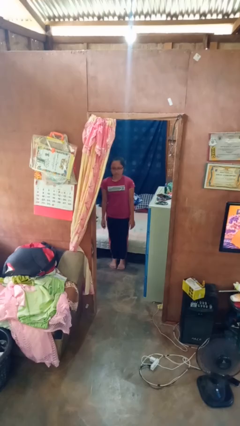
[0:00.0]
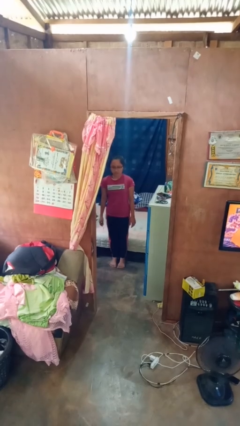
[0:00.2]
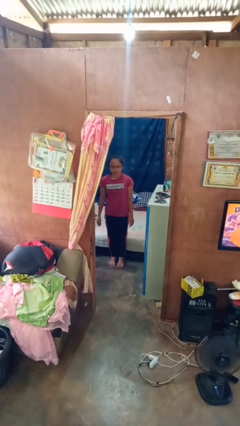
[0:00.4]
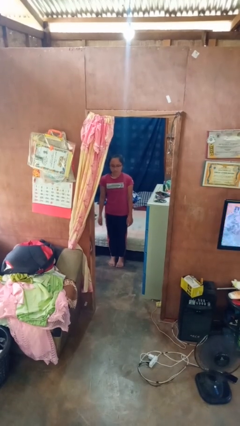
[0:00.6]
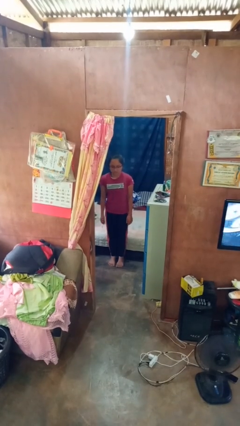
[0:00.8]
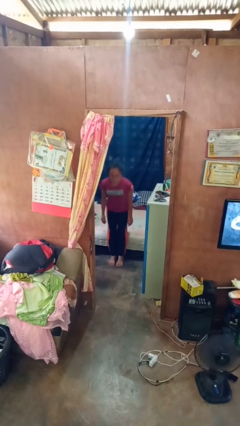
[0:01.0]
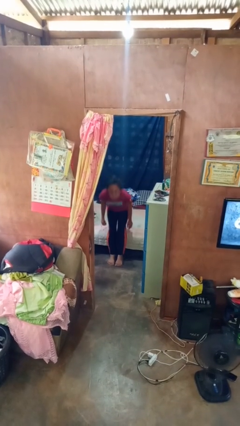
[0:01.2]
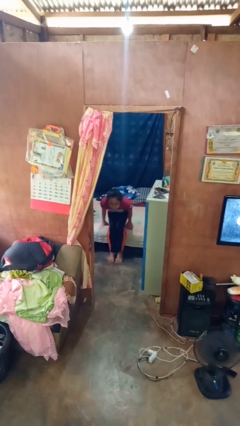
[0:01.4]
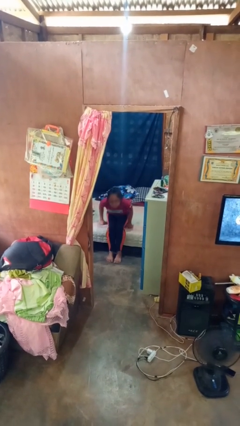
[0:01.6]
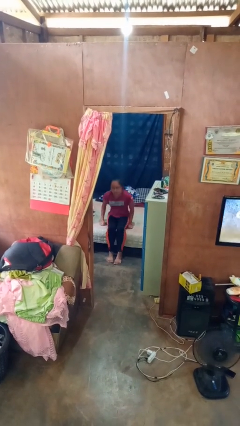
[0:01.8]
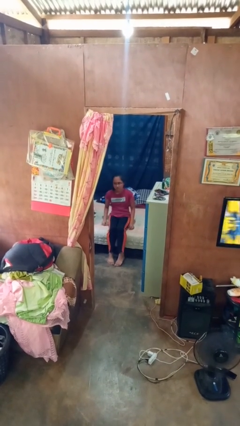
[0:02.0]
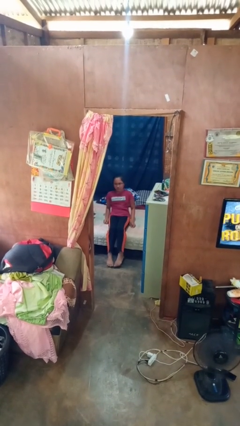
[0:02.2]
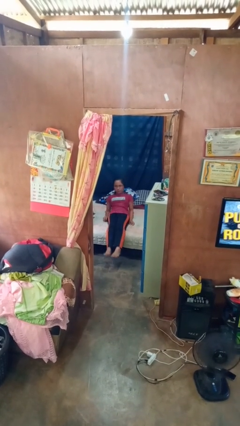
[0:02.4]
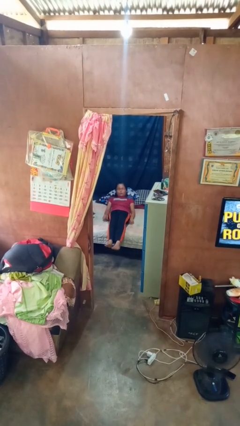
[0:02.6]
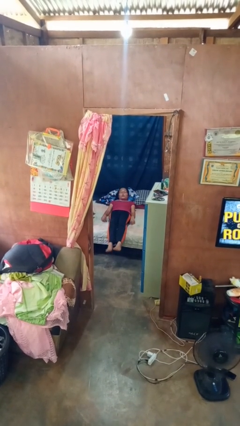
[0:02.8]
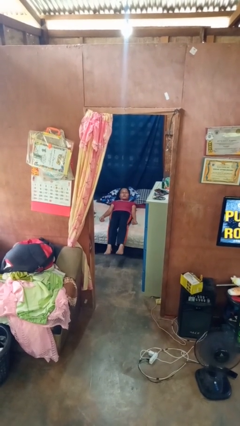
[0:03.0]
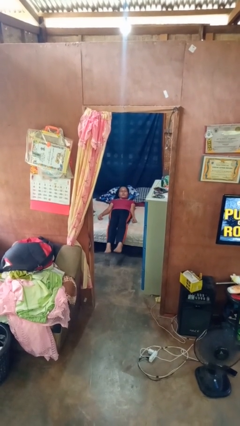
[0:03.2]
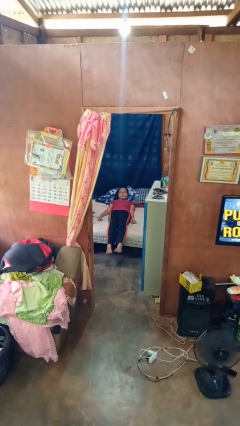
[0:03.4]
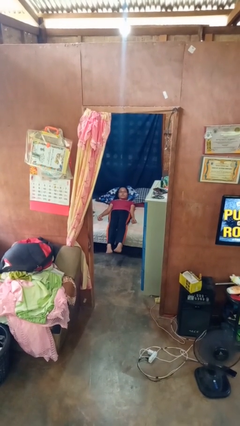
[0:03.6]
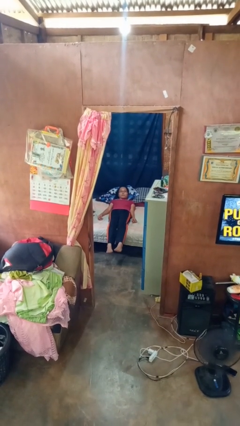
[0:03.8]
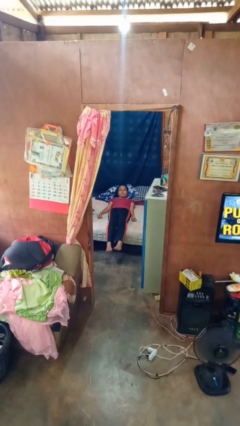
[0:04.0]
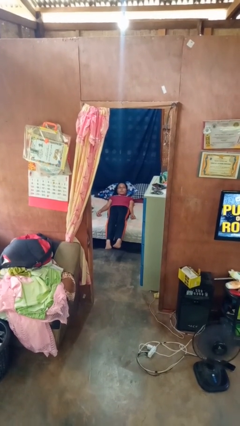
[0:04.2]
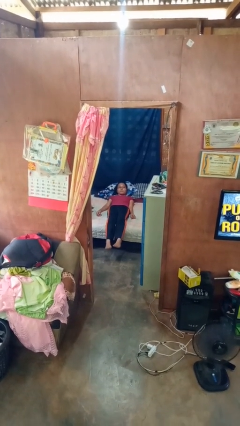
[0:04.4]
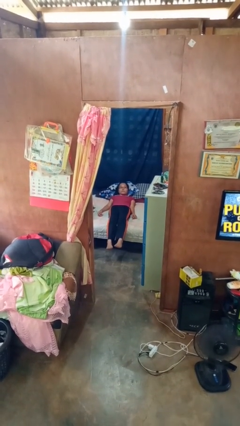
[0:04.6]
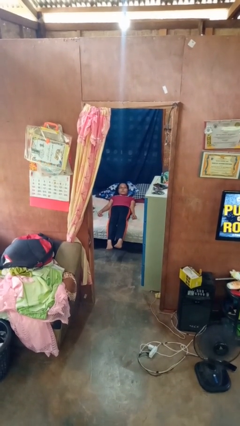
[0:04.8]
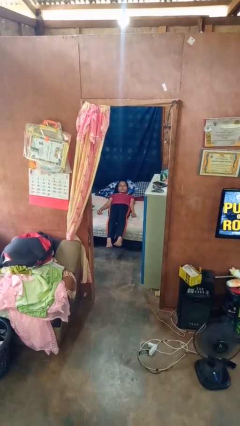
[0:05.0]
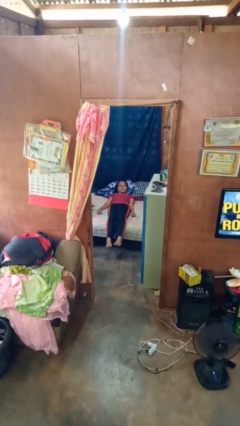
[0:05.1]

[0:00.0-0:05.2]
person lies down on bed

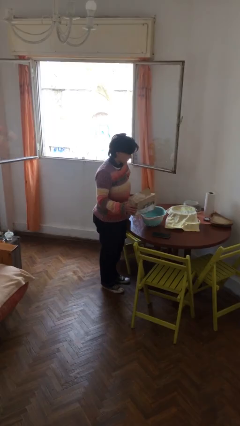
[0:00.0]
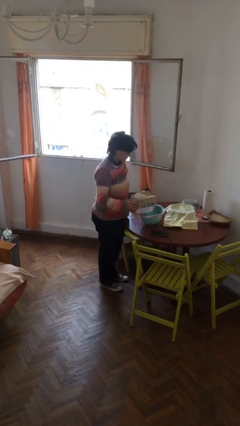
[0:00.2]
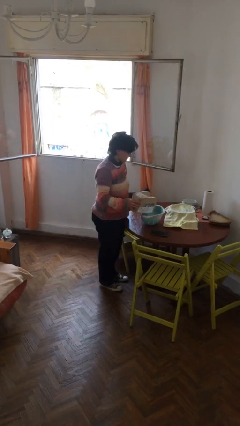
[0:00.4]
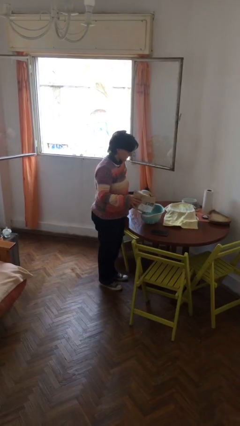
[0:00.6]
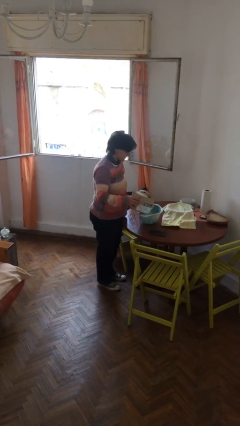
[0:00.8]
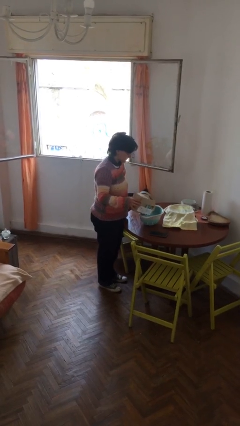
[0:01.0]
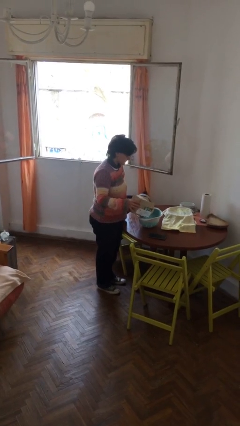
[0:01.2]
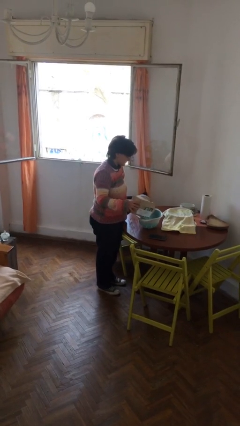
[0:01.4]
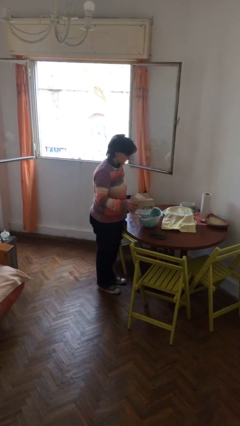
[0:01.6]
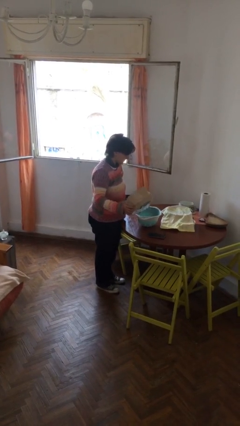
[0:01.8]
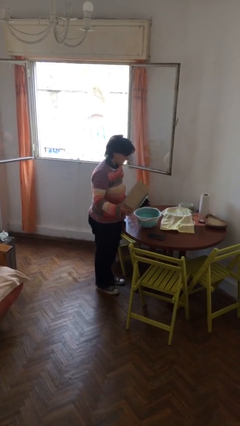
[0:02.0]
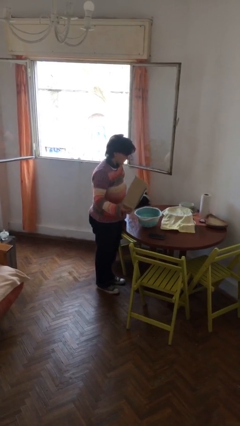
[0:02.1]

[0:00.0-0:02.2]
person pours into bowl
